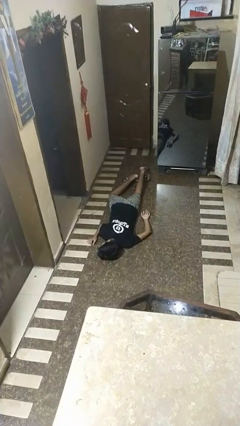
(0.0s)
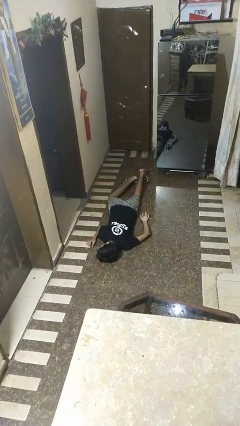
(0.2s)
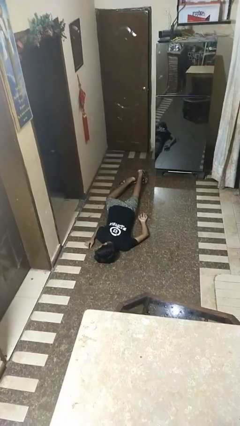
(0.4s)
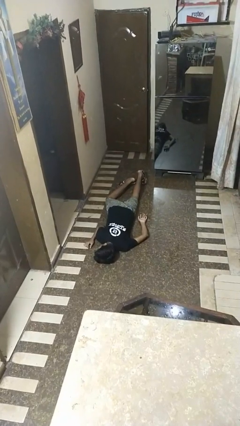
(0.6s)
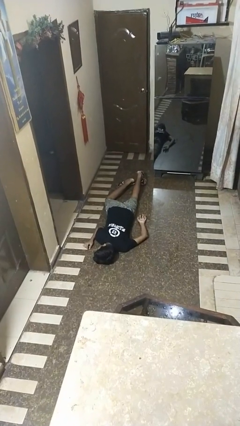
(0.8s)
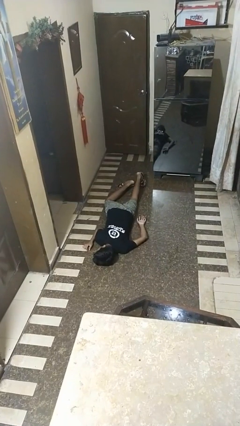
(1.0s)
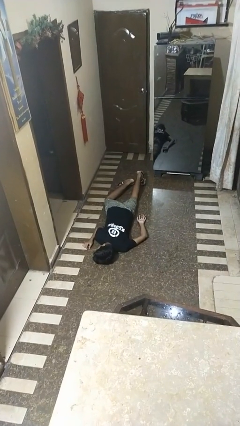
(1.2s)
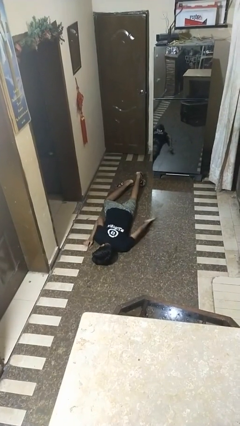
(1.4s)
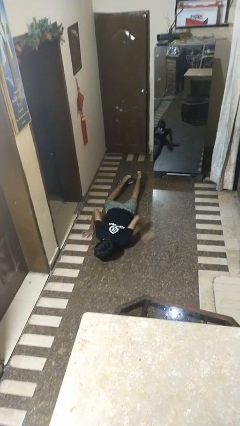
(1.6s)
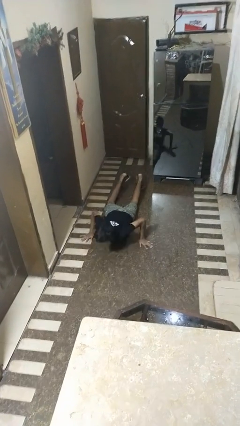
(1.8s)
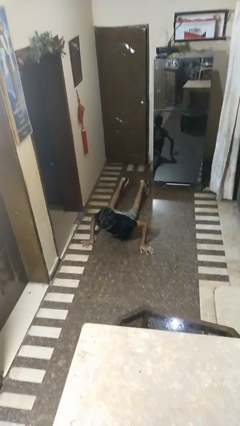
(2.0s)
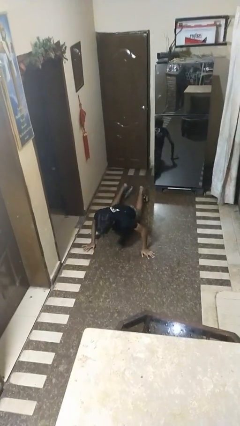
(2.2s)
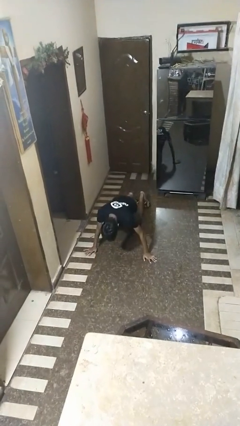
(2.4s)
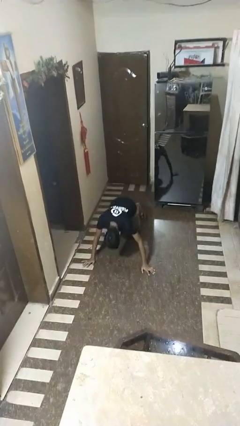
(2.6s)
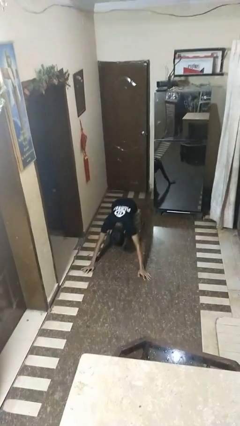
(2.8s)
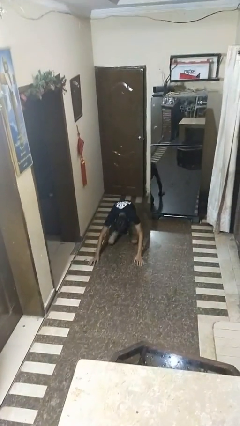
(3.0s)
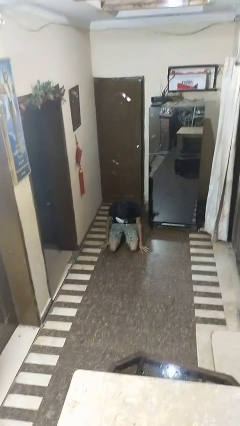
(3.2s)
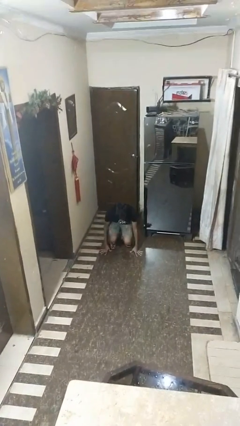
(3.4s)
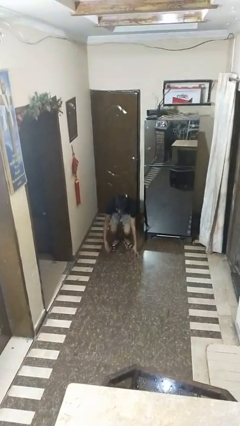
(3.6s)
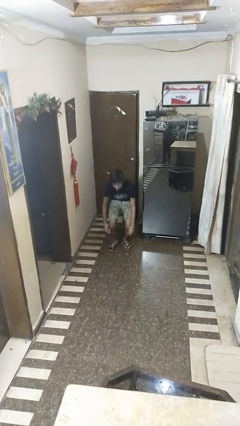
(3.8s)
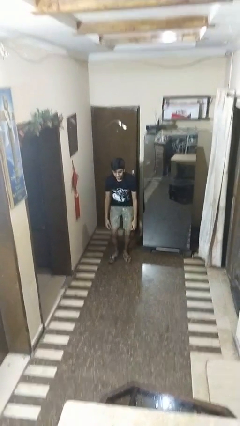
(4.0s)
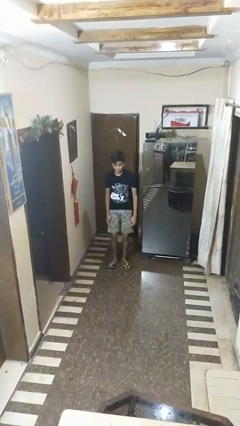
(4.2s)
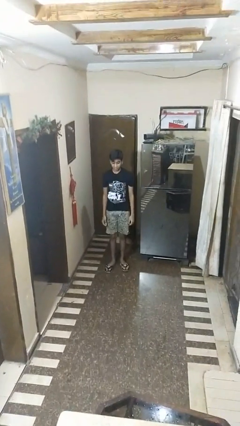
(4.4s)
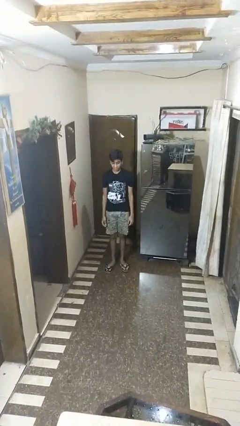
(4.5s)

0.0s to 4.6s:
person stands up from floor

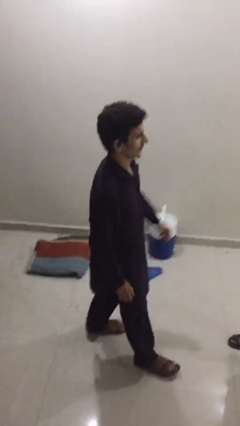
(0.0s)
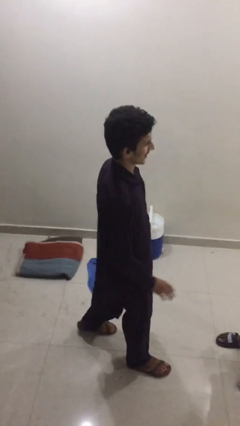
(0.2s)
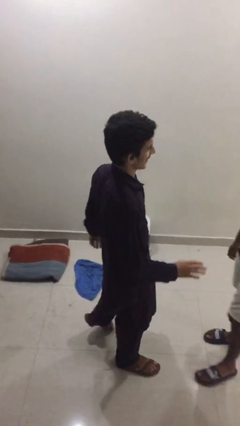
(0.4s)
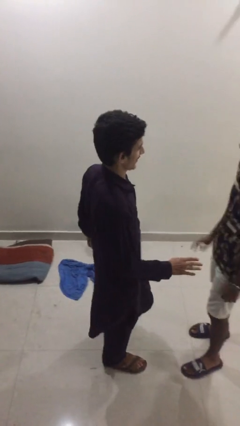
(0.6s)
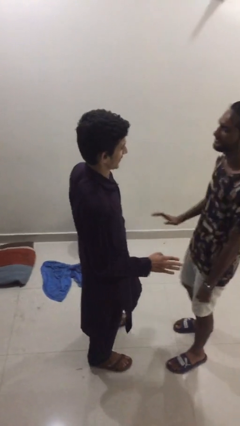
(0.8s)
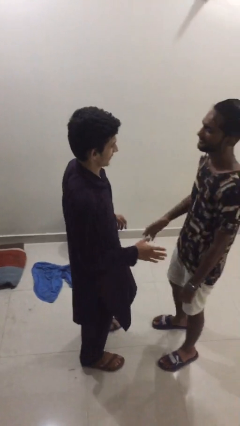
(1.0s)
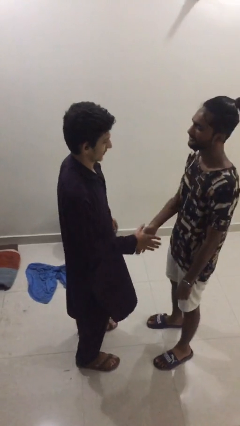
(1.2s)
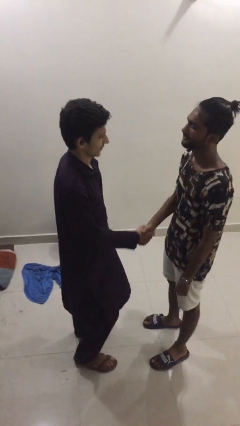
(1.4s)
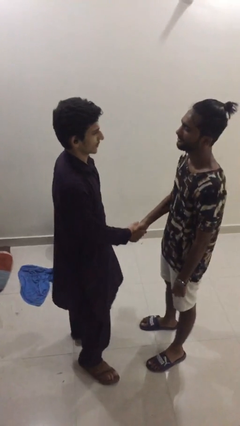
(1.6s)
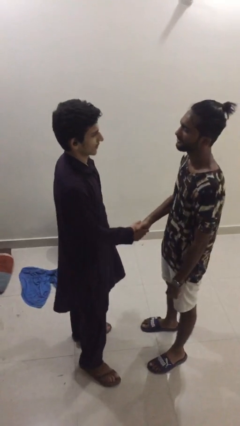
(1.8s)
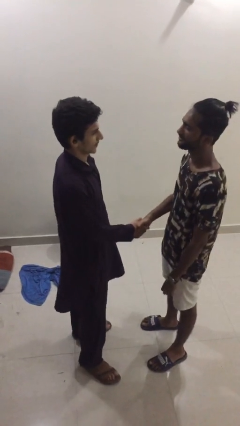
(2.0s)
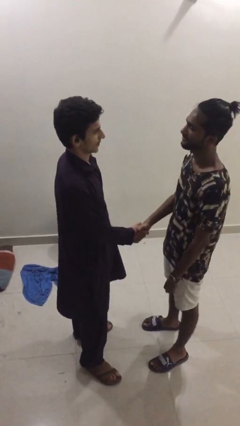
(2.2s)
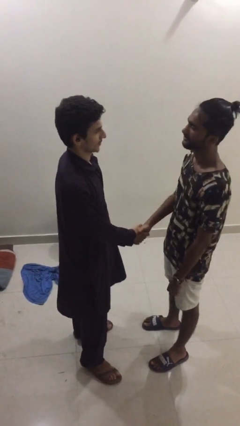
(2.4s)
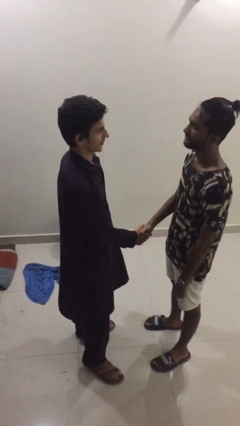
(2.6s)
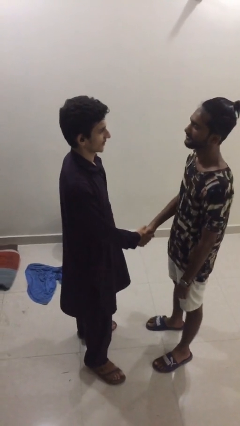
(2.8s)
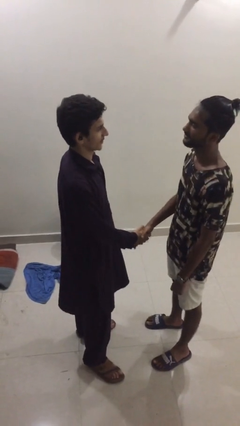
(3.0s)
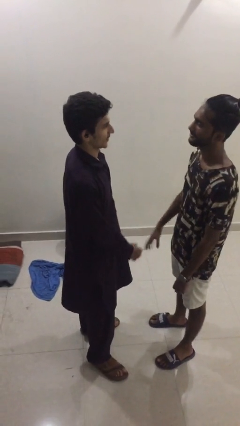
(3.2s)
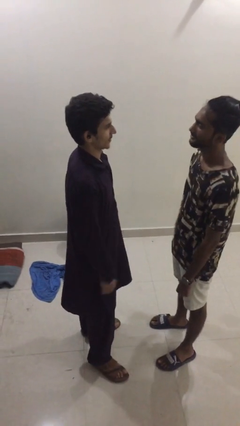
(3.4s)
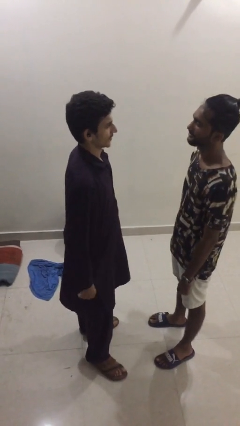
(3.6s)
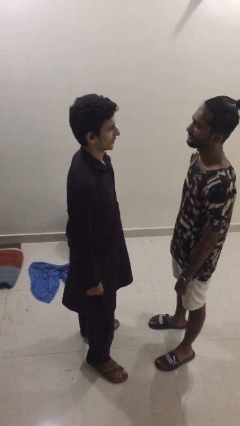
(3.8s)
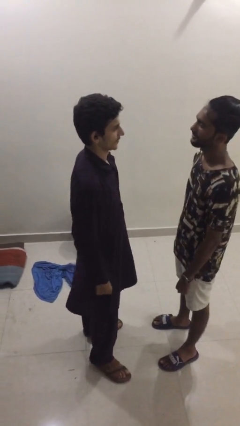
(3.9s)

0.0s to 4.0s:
person shakes hand

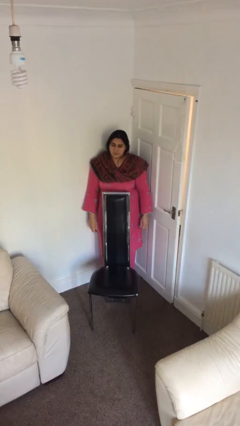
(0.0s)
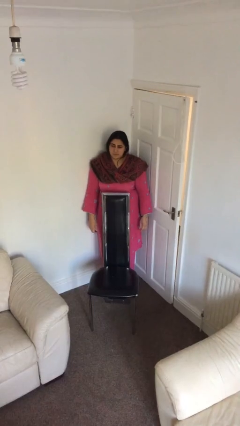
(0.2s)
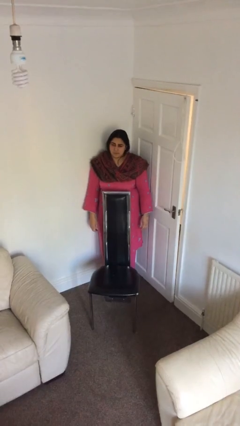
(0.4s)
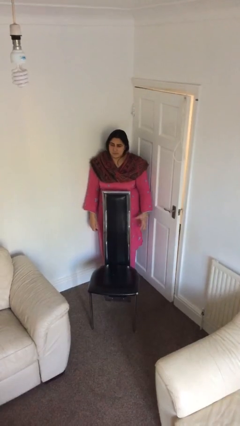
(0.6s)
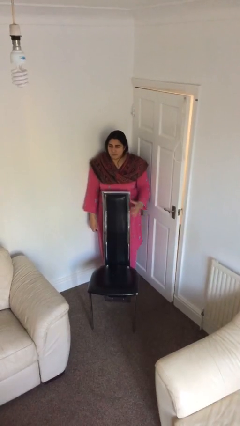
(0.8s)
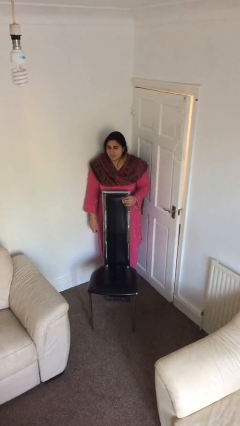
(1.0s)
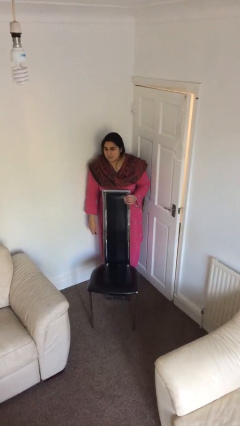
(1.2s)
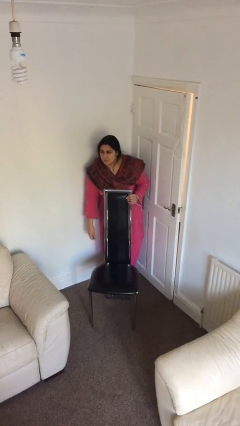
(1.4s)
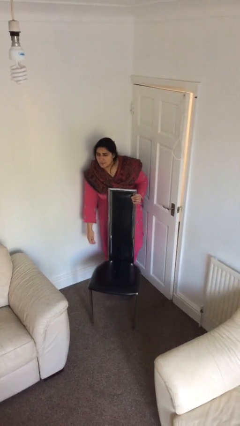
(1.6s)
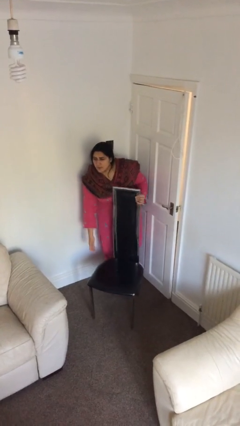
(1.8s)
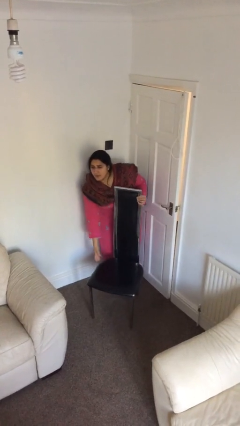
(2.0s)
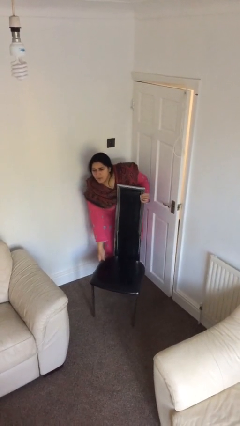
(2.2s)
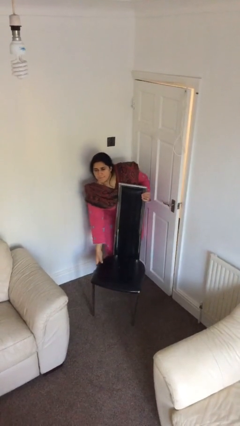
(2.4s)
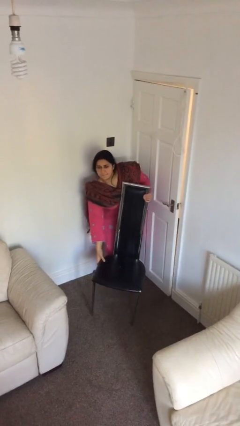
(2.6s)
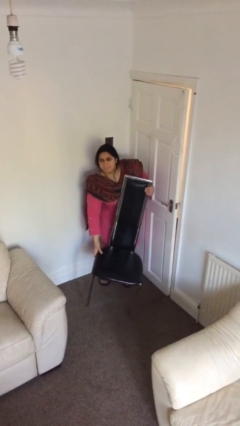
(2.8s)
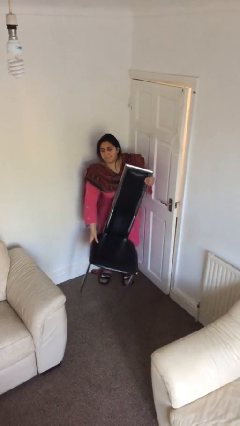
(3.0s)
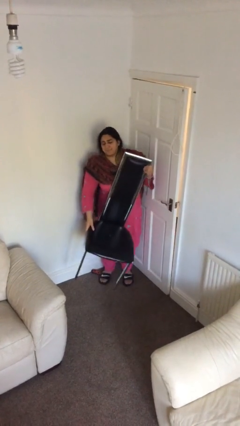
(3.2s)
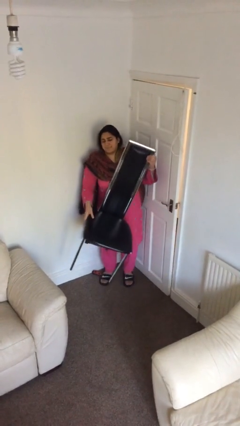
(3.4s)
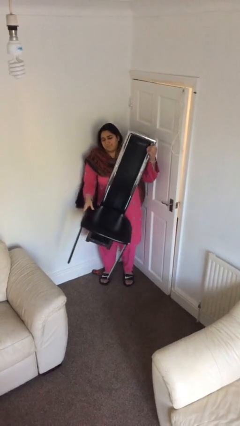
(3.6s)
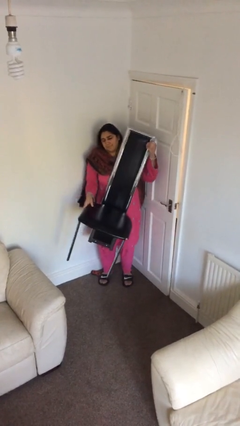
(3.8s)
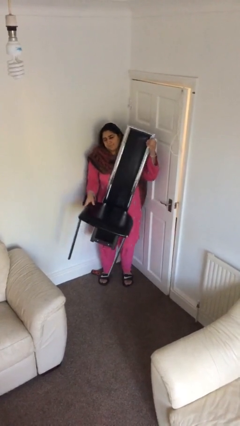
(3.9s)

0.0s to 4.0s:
person picks up object from floor

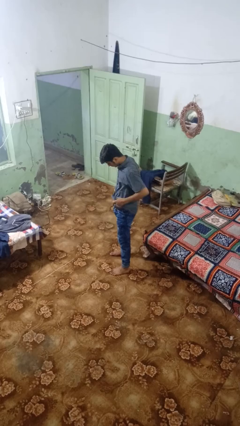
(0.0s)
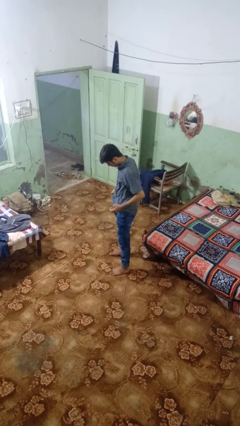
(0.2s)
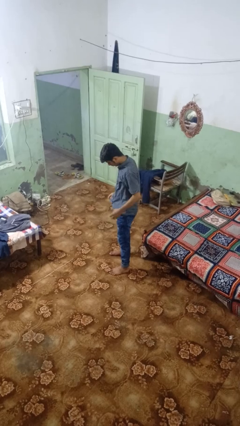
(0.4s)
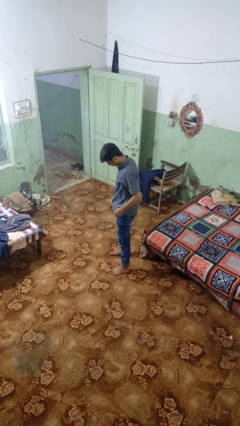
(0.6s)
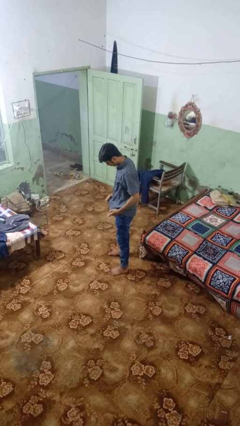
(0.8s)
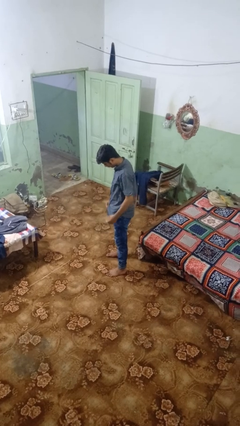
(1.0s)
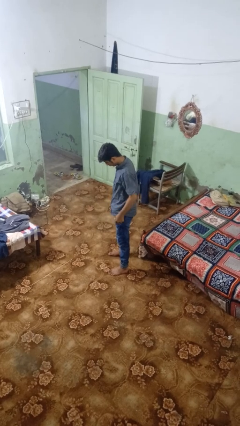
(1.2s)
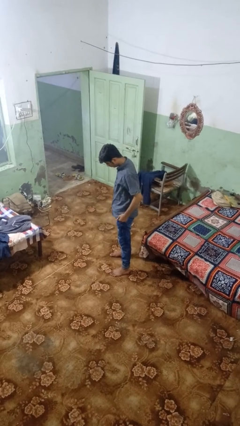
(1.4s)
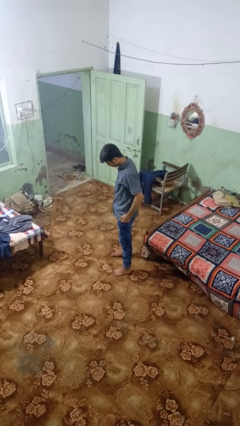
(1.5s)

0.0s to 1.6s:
person untucks shirt

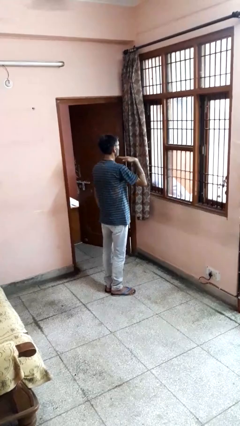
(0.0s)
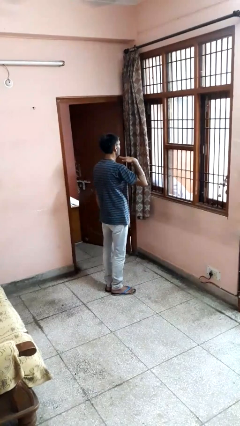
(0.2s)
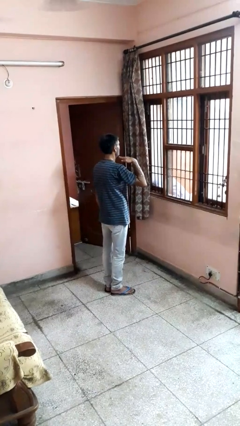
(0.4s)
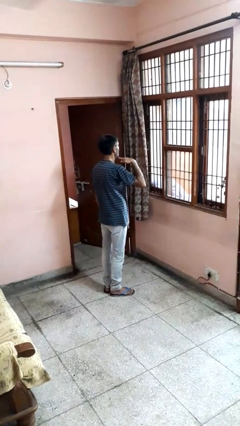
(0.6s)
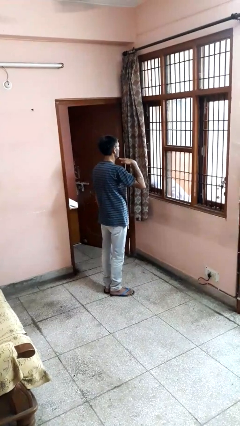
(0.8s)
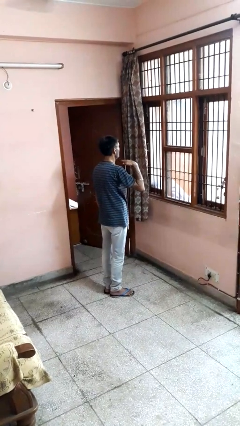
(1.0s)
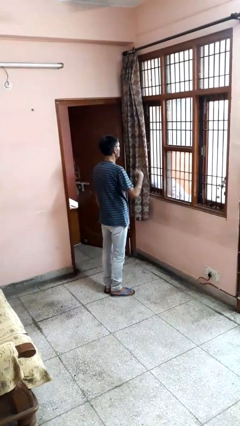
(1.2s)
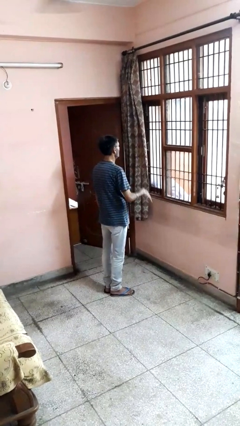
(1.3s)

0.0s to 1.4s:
person gestures cut

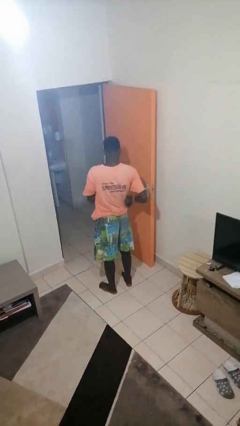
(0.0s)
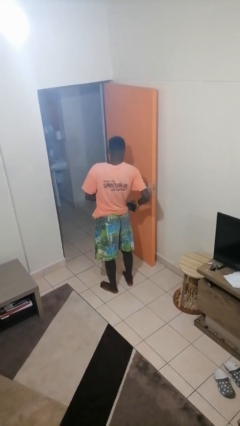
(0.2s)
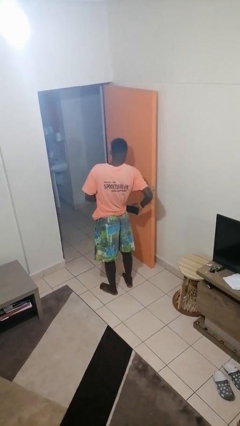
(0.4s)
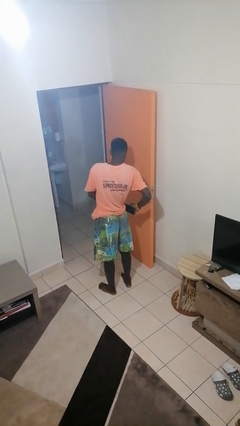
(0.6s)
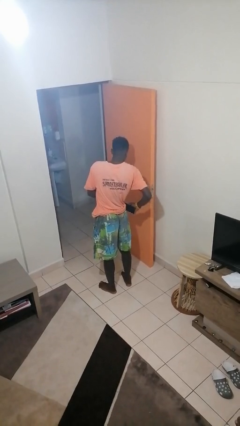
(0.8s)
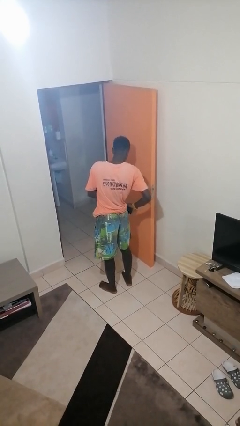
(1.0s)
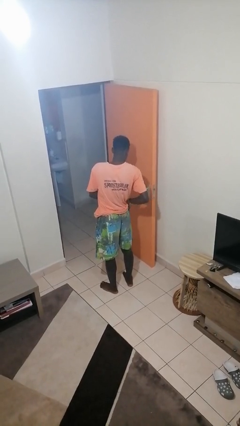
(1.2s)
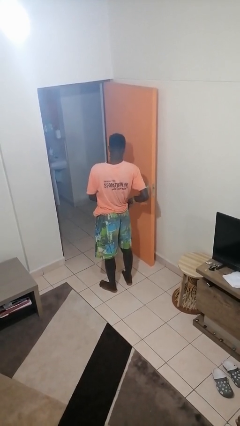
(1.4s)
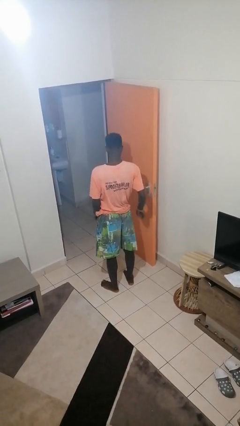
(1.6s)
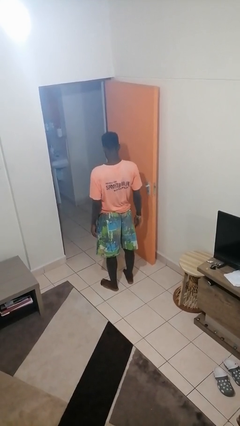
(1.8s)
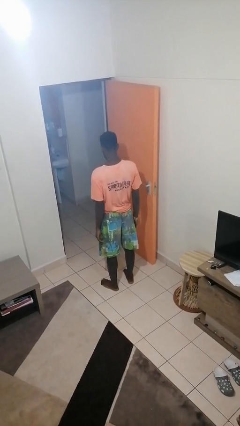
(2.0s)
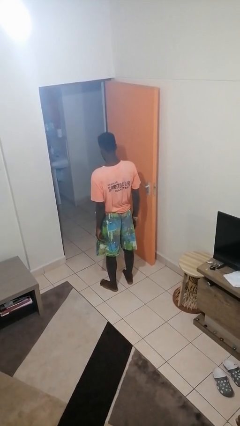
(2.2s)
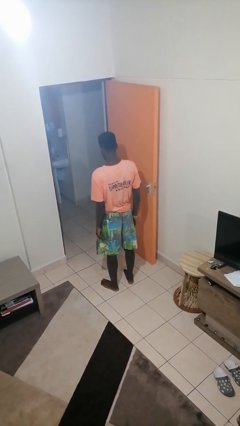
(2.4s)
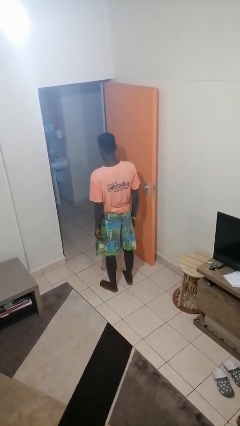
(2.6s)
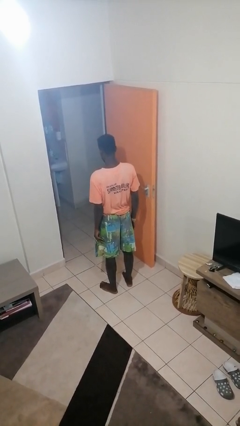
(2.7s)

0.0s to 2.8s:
person puts phone into pocket
